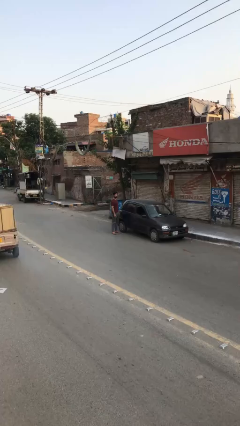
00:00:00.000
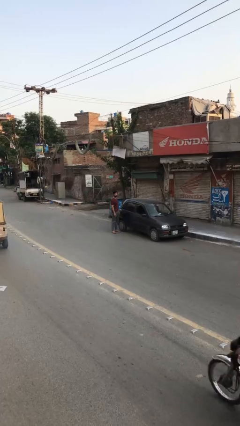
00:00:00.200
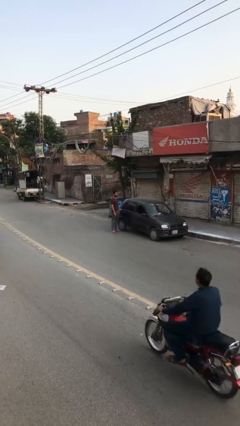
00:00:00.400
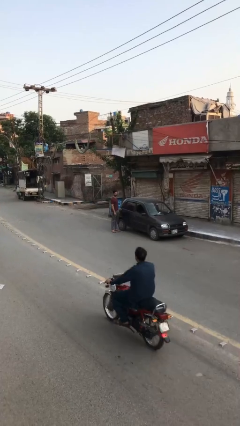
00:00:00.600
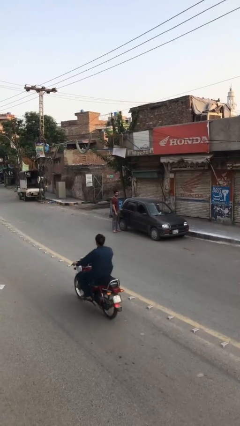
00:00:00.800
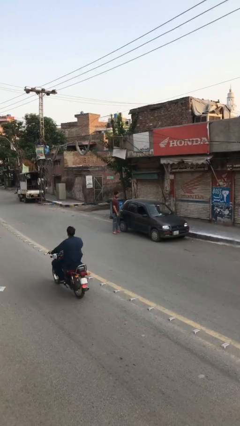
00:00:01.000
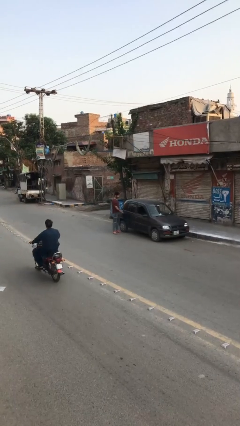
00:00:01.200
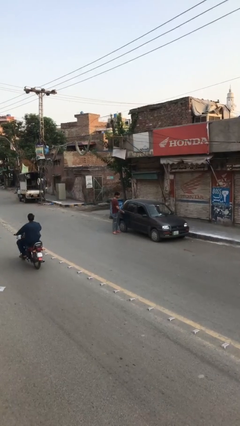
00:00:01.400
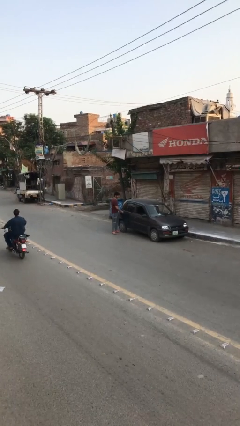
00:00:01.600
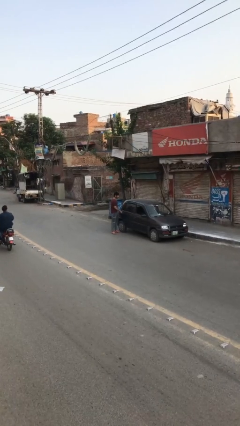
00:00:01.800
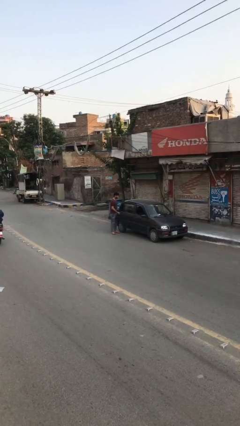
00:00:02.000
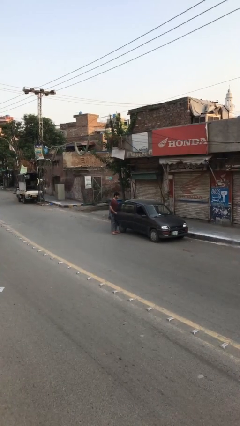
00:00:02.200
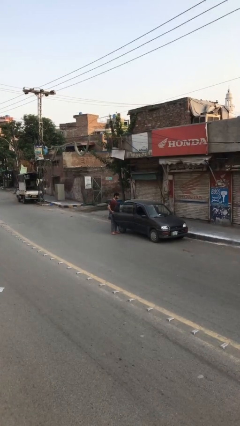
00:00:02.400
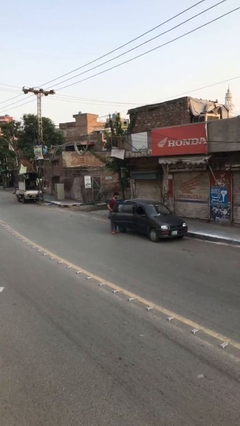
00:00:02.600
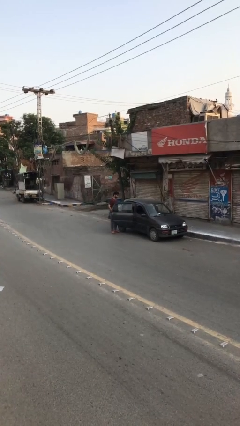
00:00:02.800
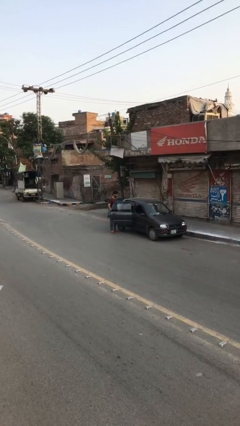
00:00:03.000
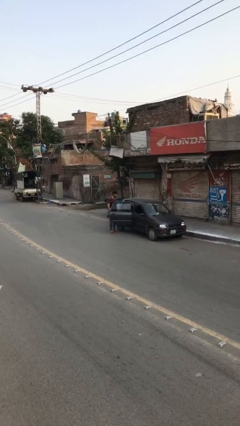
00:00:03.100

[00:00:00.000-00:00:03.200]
person opens car door

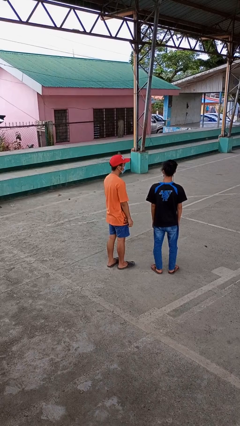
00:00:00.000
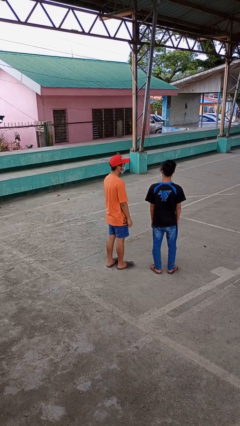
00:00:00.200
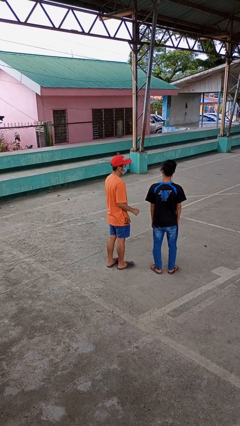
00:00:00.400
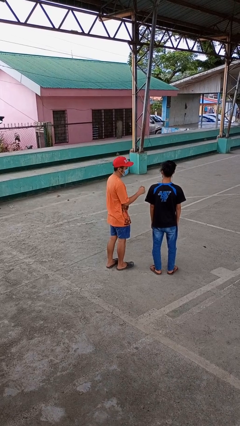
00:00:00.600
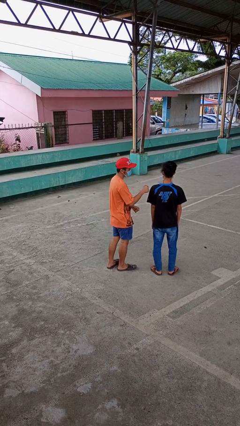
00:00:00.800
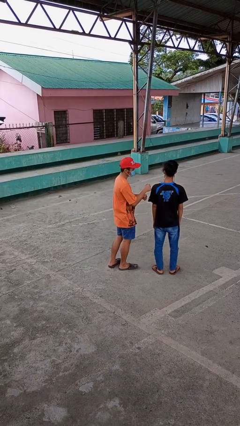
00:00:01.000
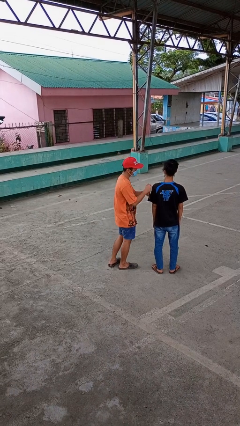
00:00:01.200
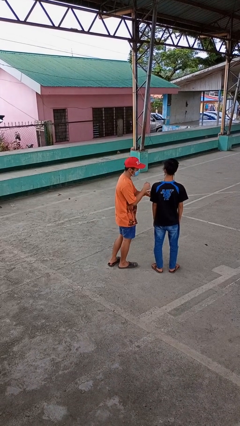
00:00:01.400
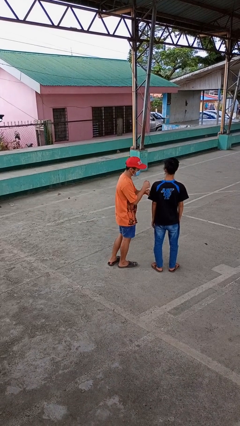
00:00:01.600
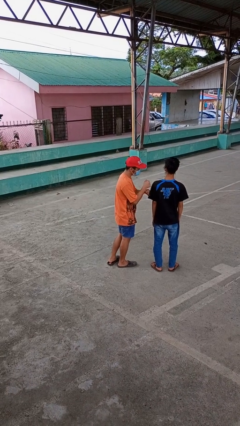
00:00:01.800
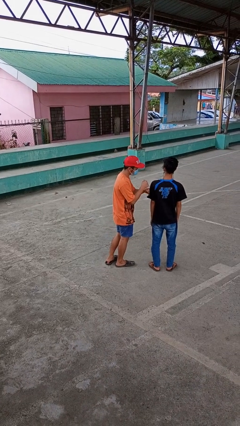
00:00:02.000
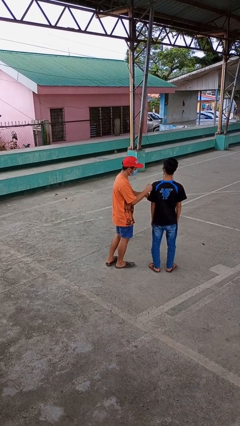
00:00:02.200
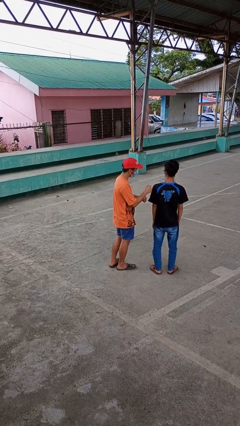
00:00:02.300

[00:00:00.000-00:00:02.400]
person pounds shoulders of person

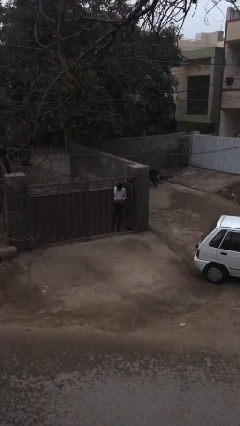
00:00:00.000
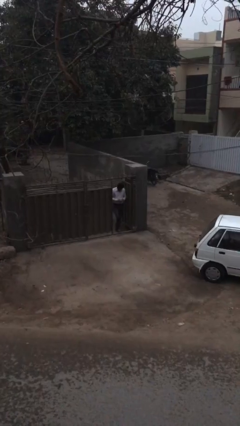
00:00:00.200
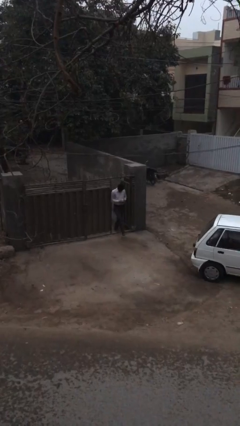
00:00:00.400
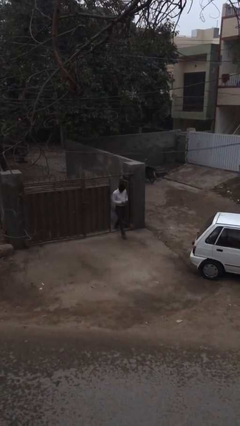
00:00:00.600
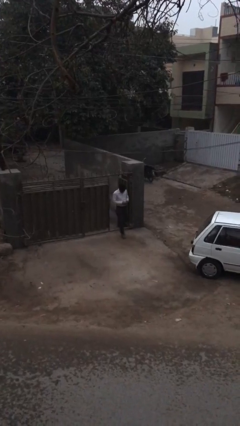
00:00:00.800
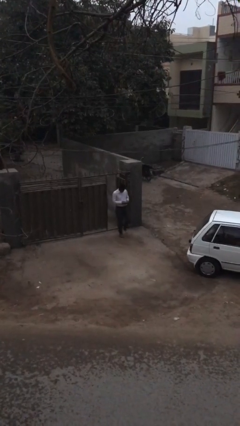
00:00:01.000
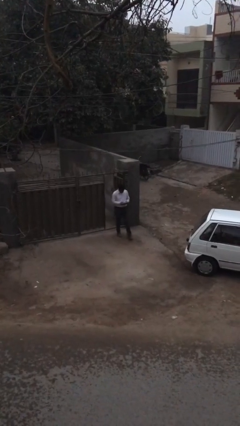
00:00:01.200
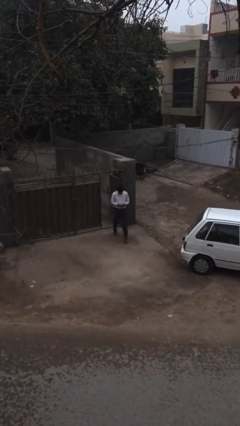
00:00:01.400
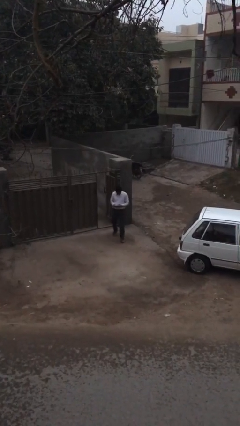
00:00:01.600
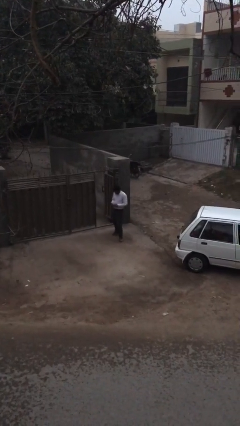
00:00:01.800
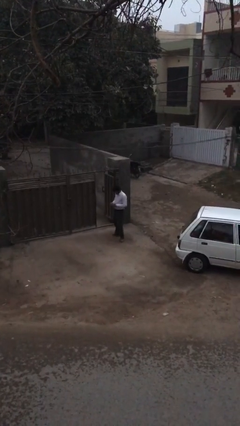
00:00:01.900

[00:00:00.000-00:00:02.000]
person enters scene through structure

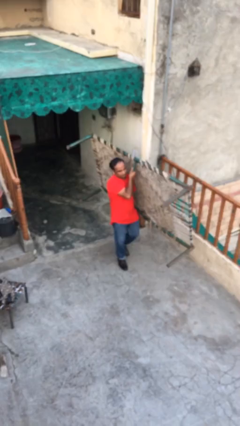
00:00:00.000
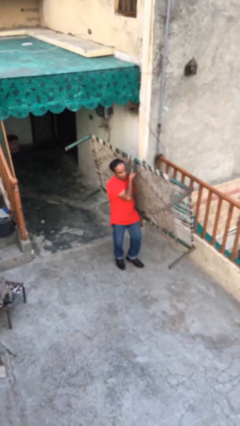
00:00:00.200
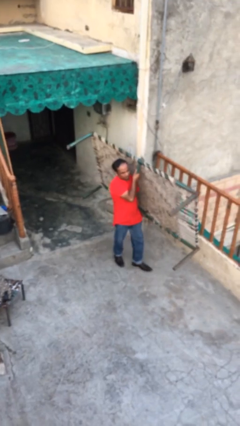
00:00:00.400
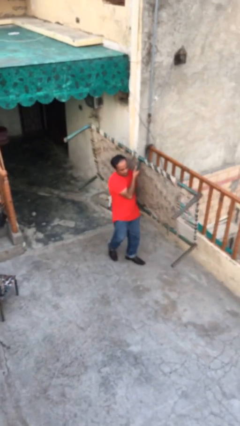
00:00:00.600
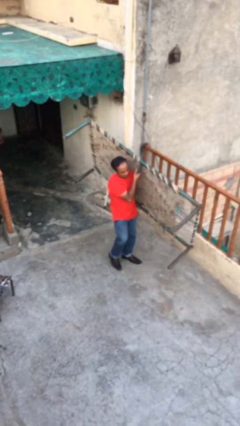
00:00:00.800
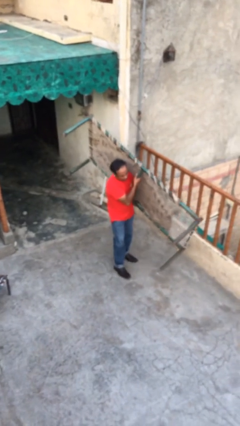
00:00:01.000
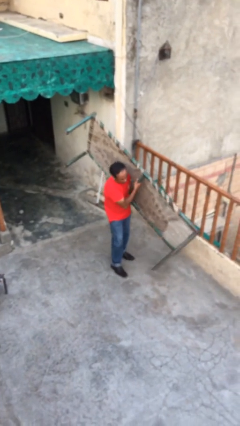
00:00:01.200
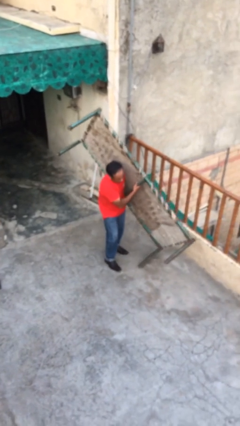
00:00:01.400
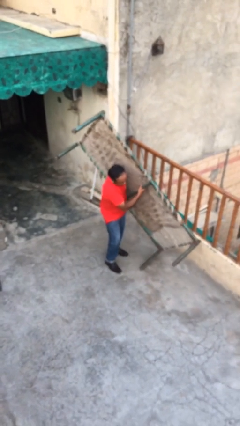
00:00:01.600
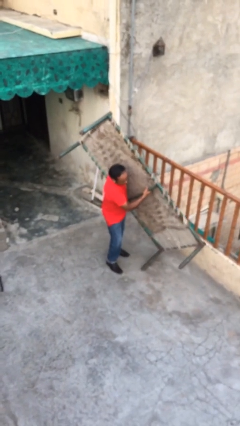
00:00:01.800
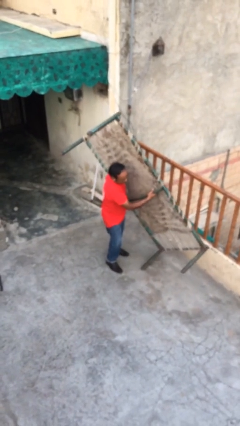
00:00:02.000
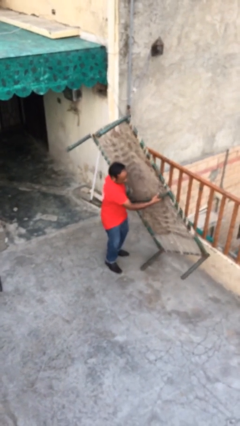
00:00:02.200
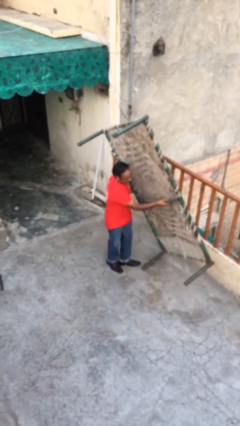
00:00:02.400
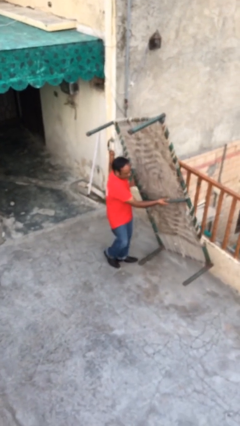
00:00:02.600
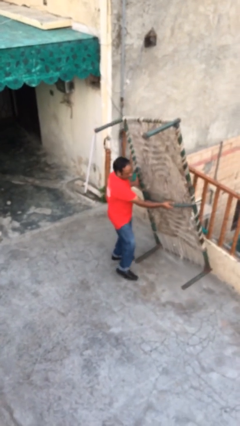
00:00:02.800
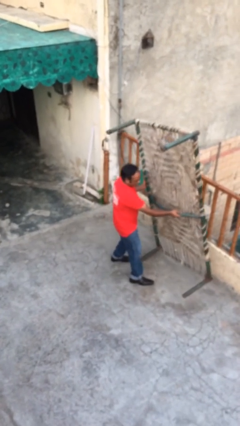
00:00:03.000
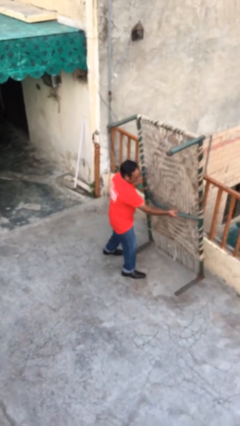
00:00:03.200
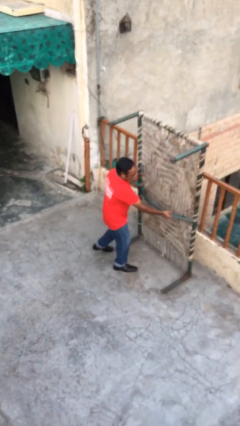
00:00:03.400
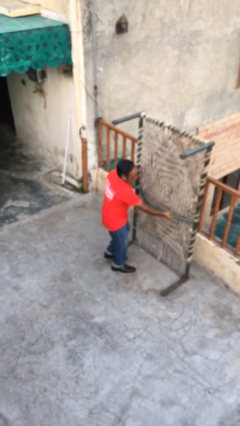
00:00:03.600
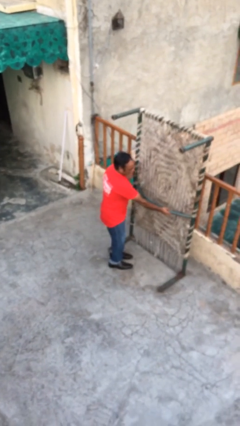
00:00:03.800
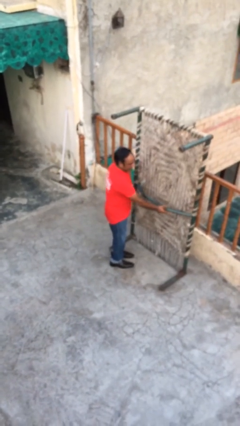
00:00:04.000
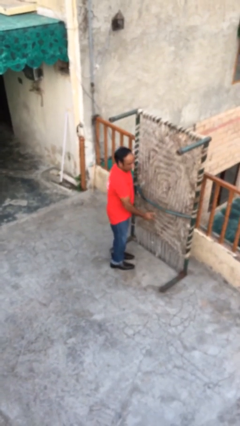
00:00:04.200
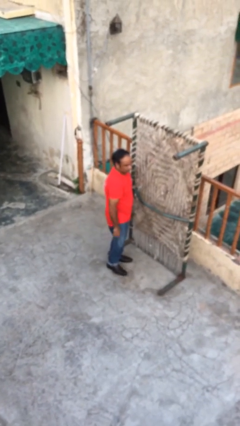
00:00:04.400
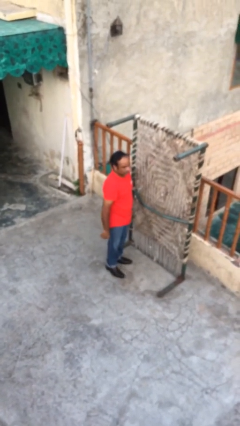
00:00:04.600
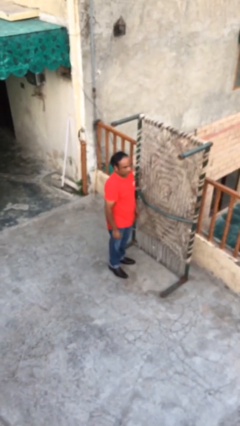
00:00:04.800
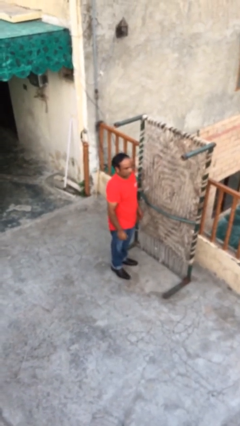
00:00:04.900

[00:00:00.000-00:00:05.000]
person puts down object on floor

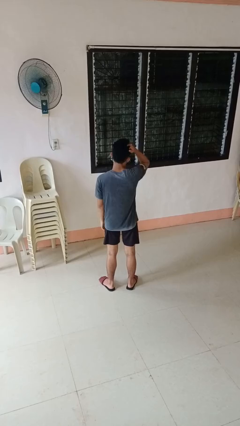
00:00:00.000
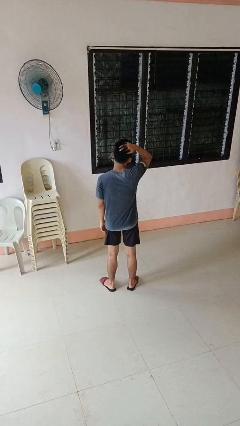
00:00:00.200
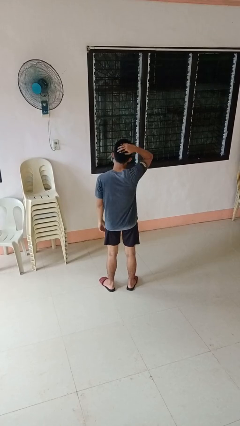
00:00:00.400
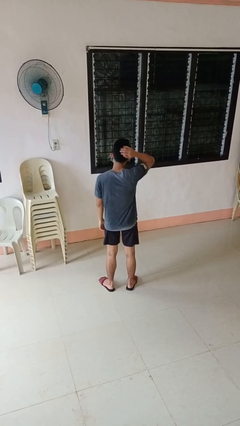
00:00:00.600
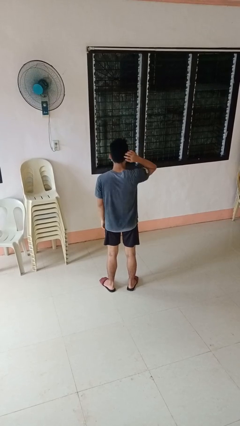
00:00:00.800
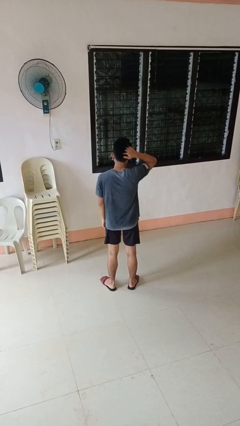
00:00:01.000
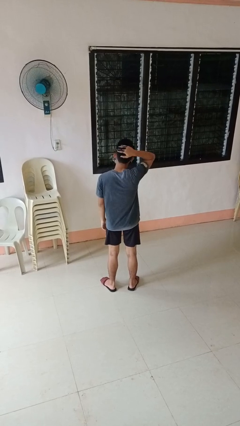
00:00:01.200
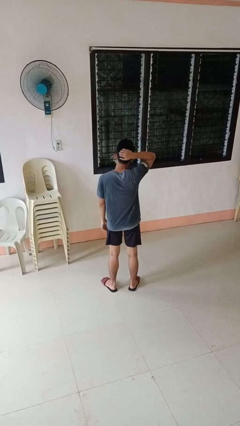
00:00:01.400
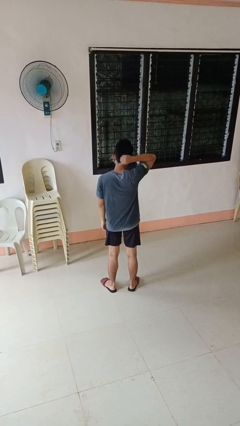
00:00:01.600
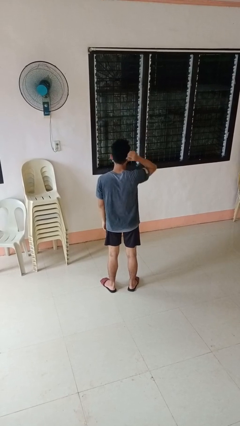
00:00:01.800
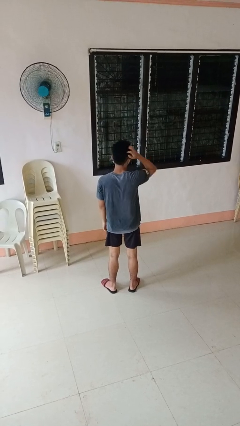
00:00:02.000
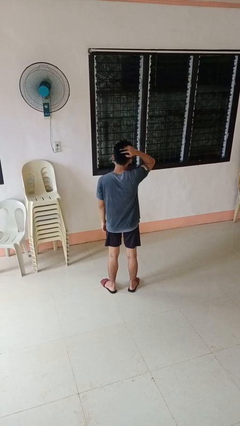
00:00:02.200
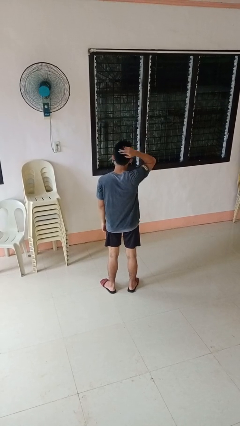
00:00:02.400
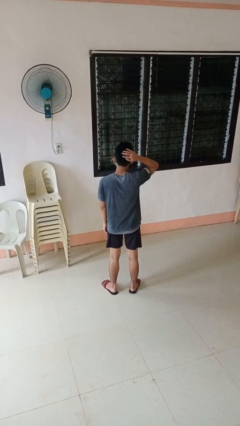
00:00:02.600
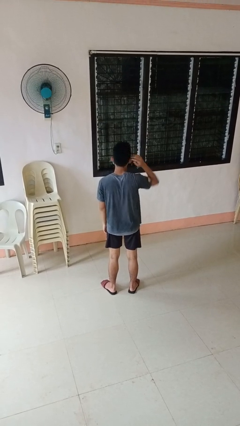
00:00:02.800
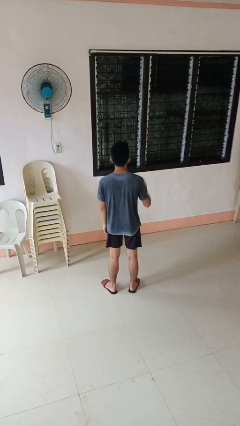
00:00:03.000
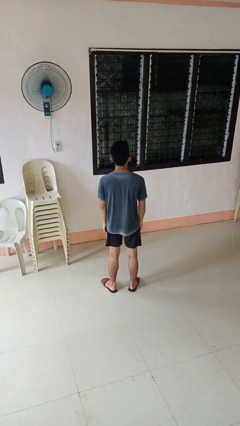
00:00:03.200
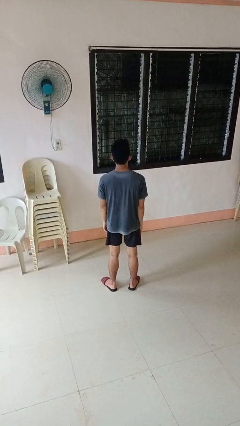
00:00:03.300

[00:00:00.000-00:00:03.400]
person strokes hair

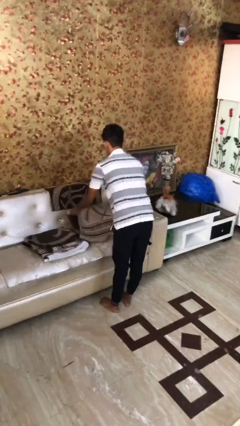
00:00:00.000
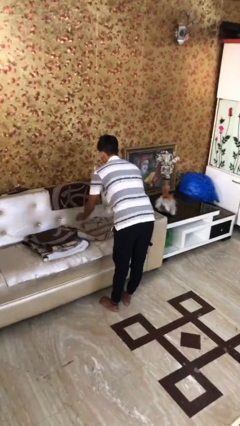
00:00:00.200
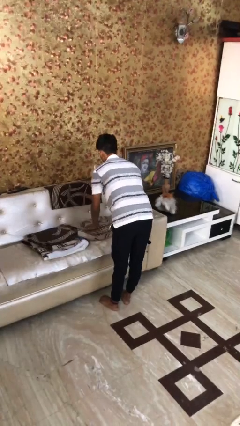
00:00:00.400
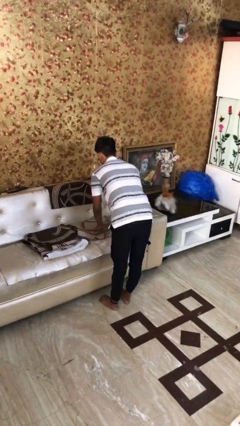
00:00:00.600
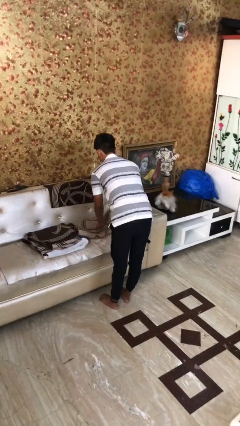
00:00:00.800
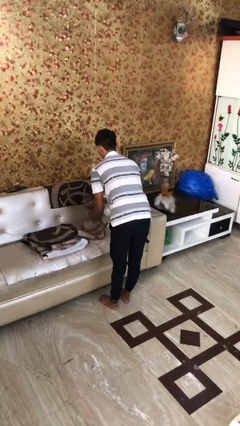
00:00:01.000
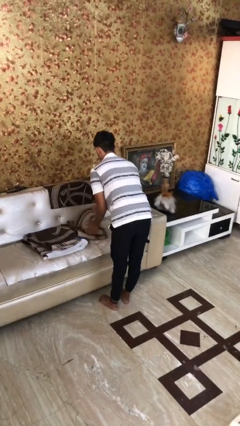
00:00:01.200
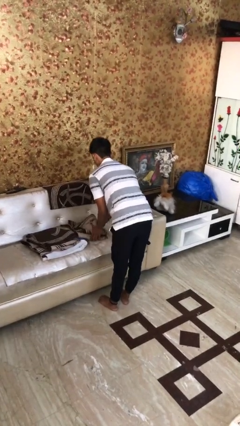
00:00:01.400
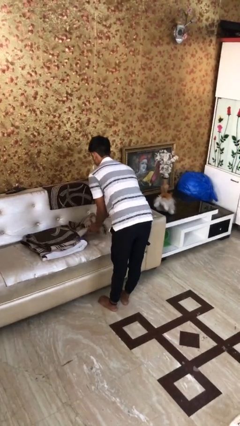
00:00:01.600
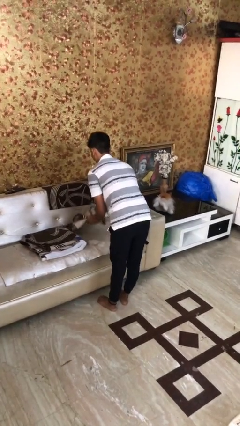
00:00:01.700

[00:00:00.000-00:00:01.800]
person folds towel
